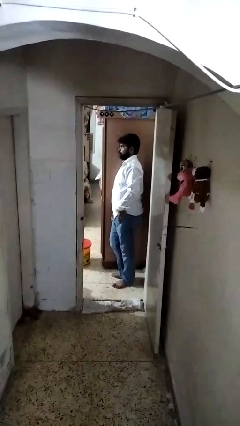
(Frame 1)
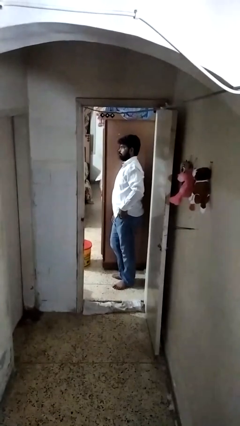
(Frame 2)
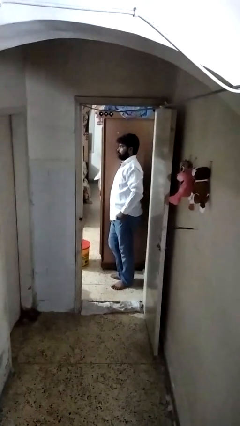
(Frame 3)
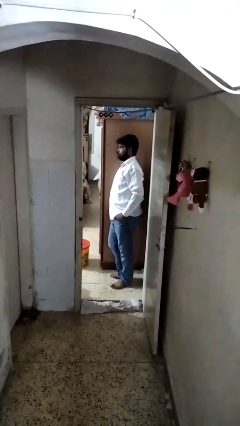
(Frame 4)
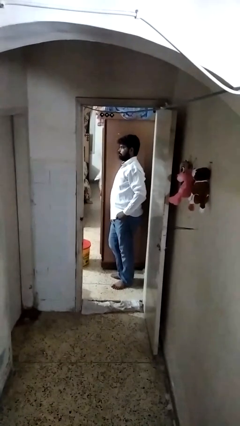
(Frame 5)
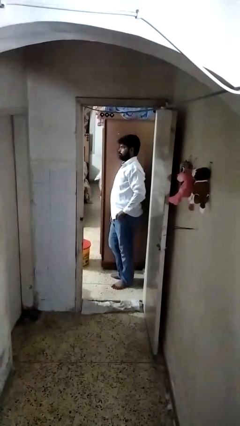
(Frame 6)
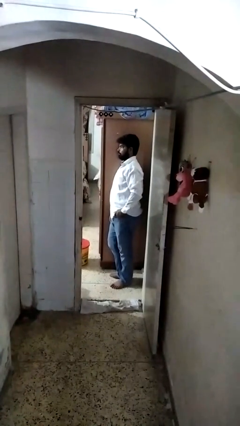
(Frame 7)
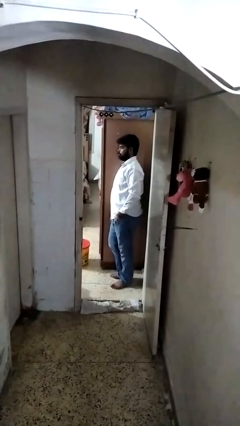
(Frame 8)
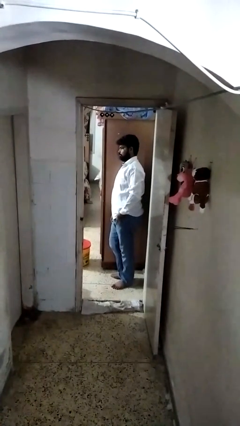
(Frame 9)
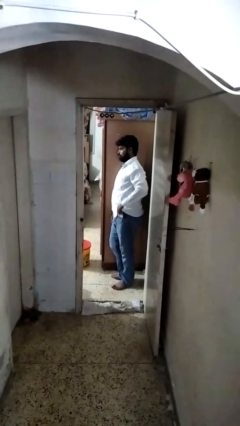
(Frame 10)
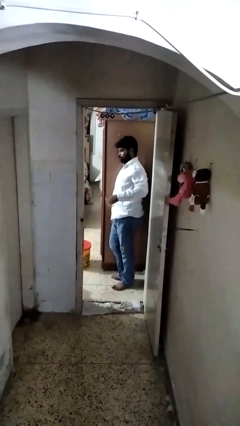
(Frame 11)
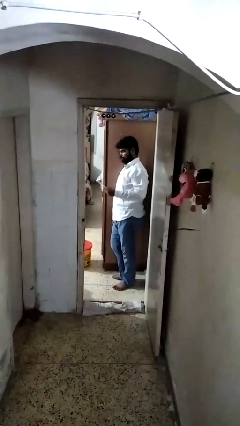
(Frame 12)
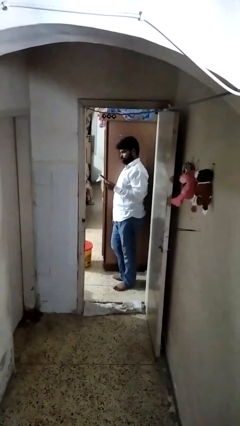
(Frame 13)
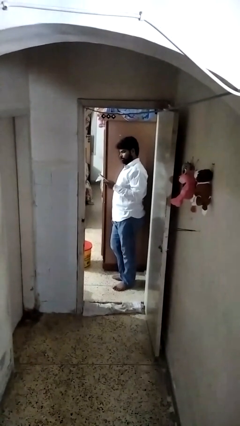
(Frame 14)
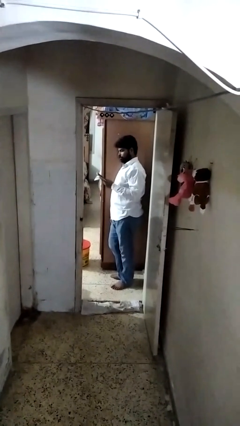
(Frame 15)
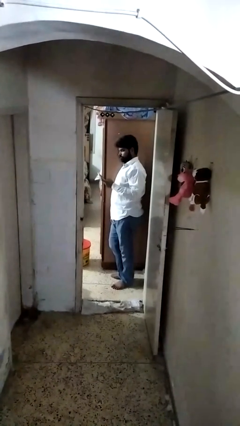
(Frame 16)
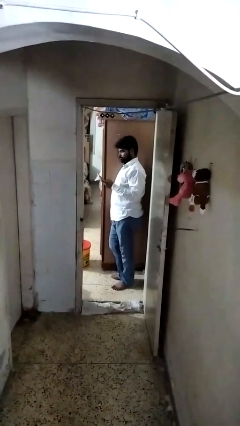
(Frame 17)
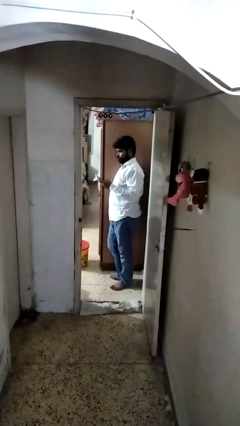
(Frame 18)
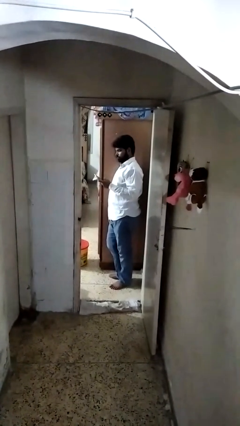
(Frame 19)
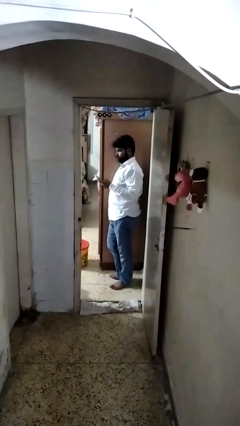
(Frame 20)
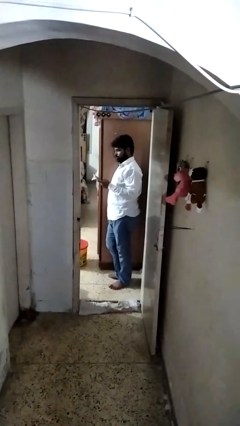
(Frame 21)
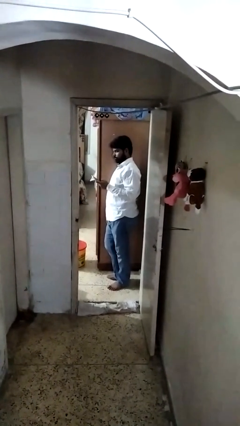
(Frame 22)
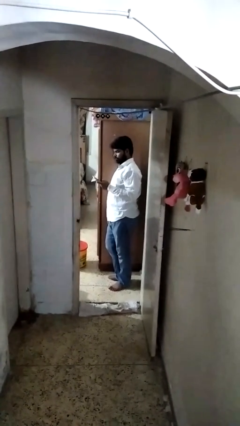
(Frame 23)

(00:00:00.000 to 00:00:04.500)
person takes phone from pocket

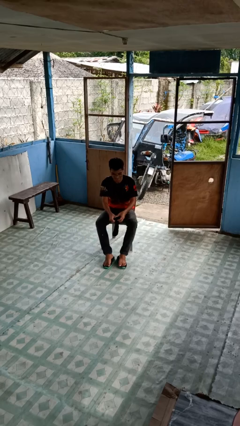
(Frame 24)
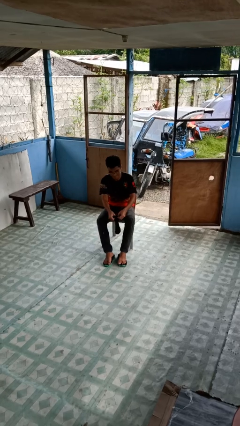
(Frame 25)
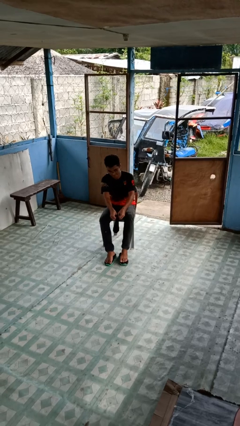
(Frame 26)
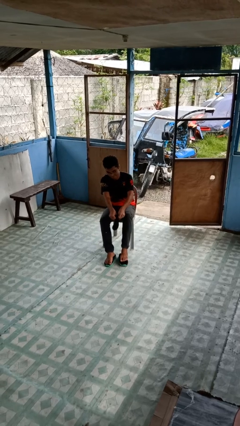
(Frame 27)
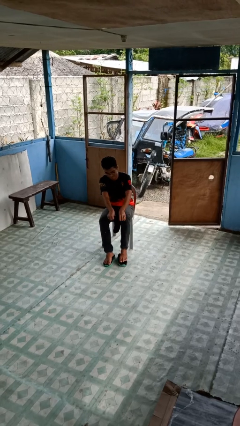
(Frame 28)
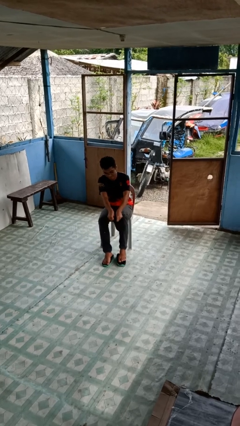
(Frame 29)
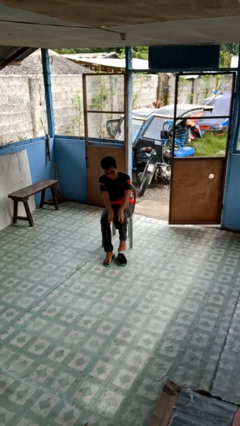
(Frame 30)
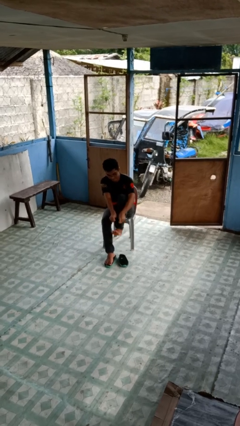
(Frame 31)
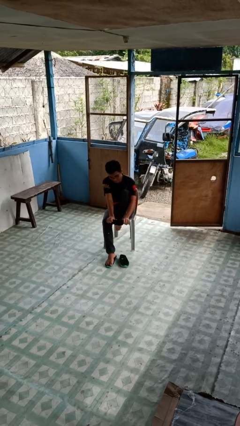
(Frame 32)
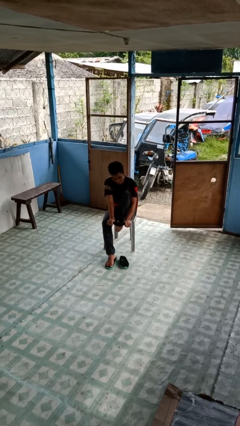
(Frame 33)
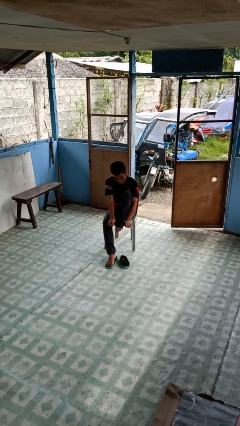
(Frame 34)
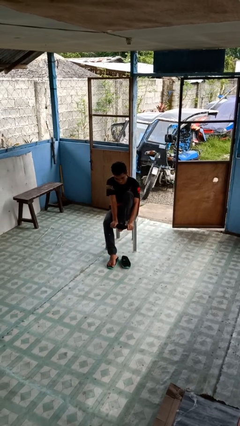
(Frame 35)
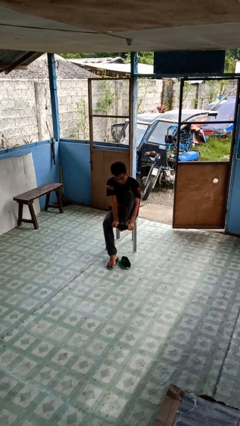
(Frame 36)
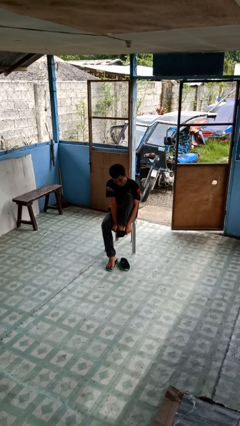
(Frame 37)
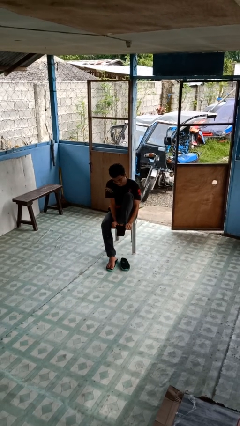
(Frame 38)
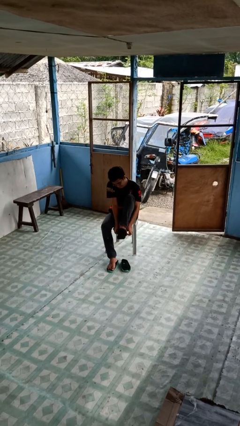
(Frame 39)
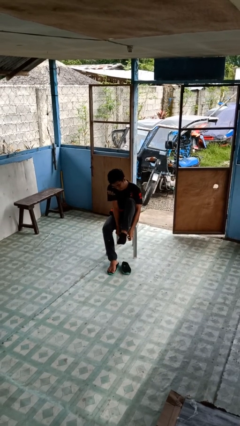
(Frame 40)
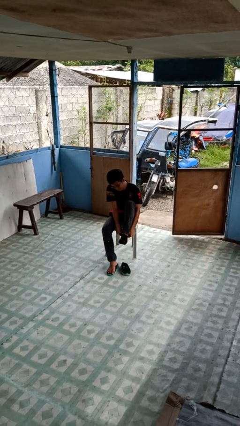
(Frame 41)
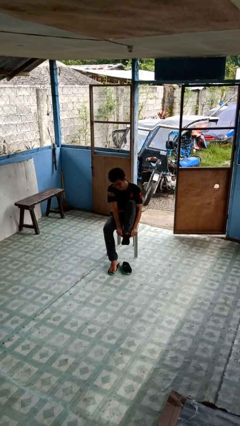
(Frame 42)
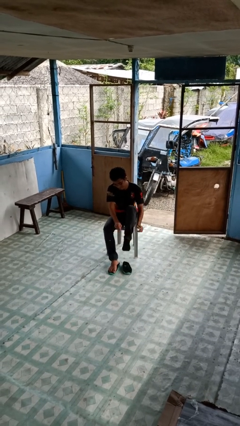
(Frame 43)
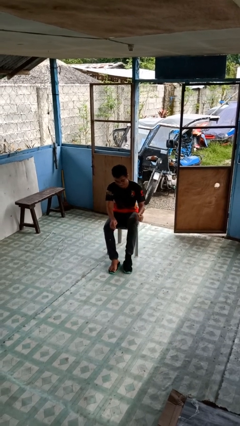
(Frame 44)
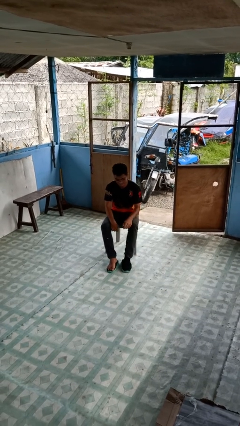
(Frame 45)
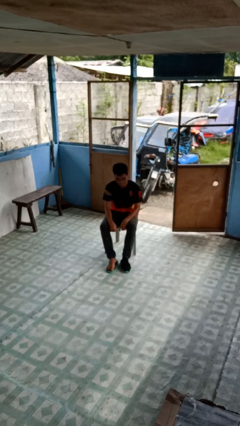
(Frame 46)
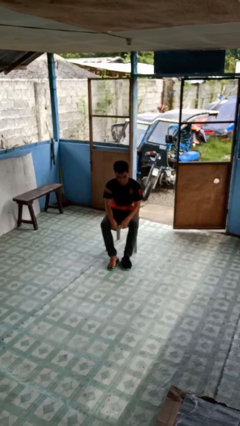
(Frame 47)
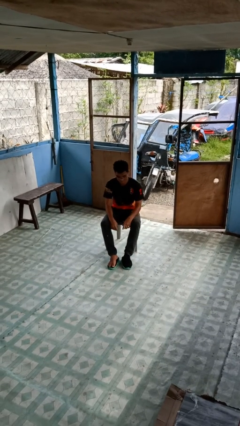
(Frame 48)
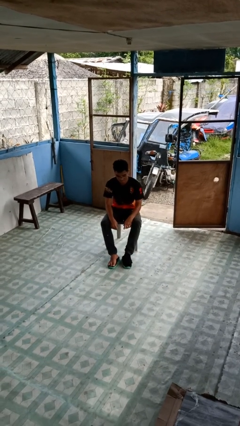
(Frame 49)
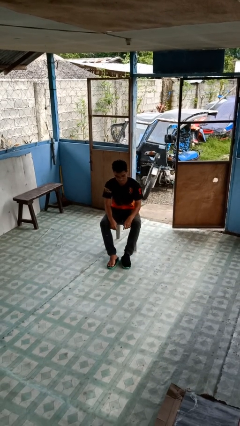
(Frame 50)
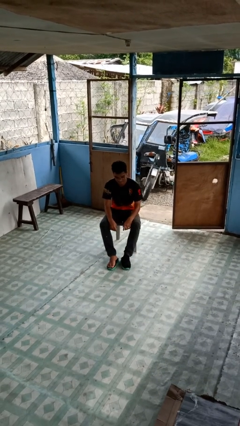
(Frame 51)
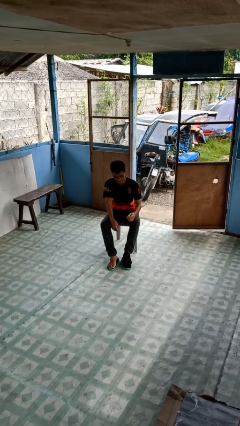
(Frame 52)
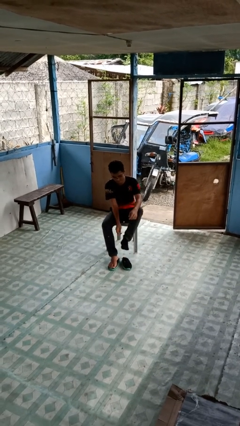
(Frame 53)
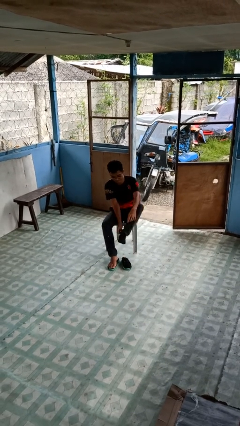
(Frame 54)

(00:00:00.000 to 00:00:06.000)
person puts on socks

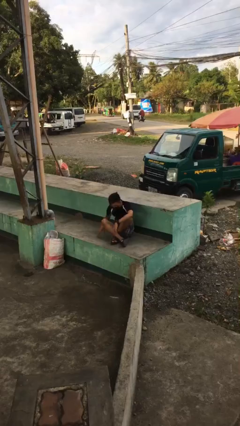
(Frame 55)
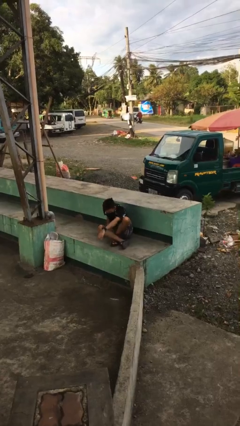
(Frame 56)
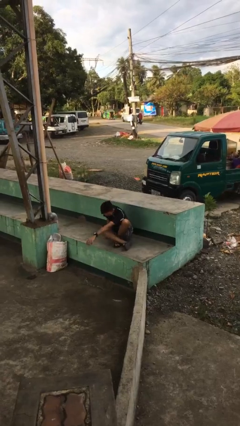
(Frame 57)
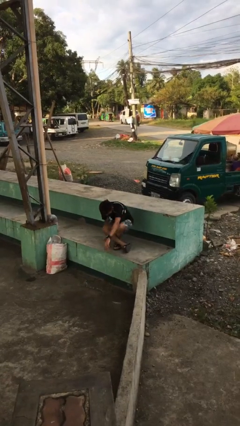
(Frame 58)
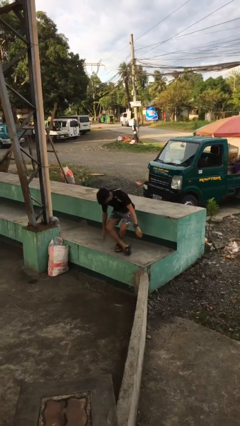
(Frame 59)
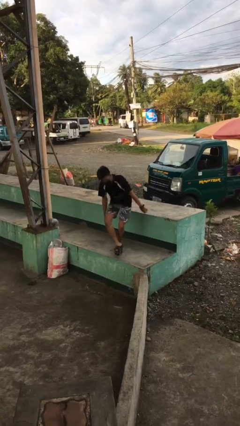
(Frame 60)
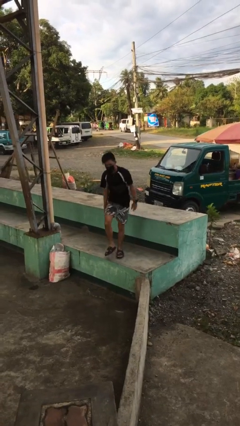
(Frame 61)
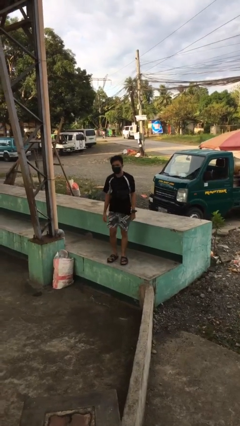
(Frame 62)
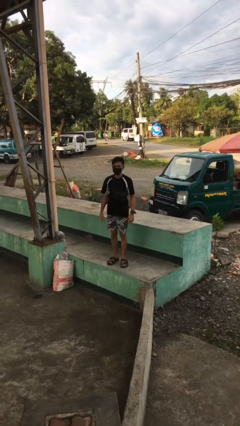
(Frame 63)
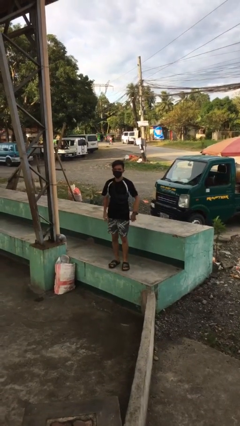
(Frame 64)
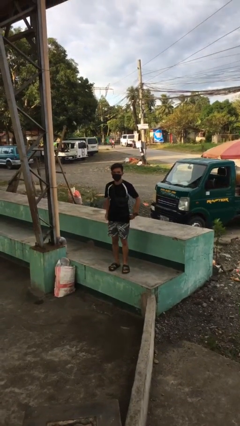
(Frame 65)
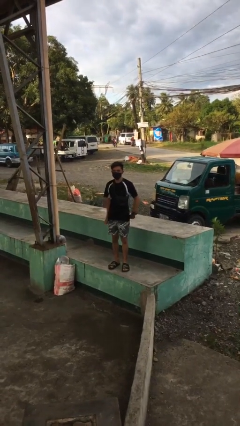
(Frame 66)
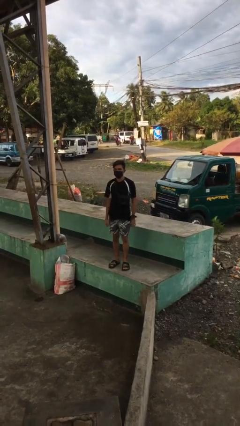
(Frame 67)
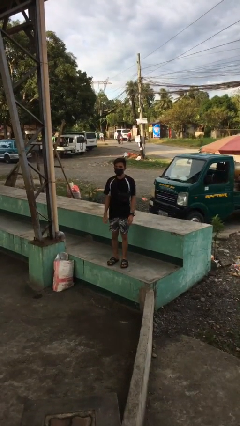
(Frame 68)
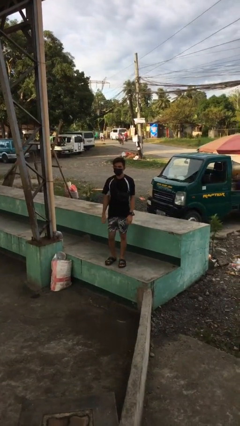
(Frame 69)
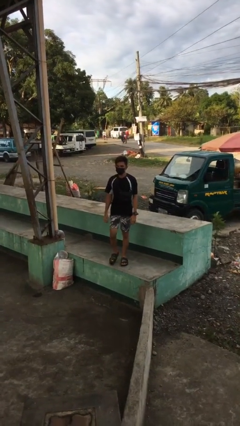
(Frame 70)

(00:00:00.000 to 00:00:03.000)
person stands up from floor

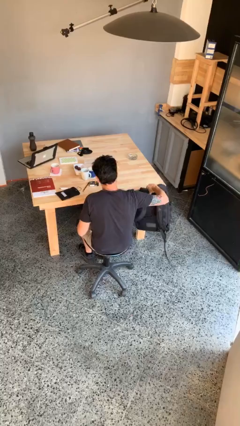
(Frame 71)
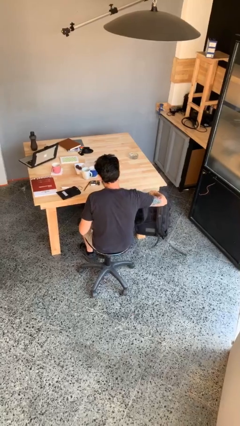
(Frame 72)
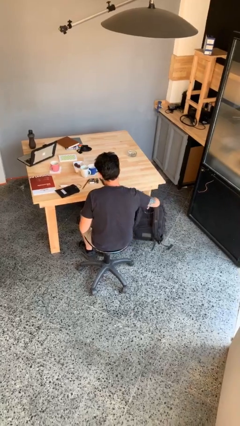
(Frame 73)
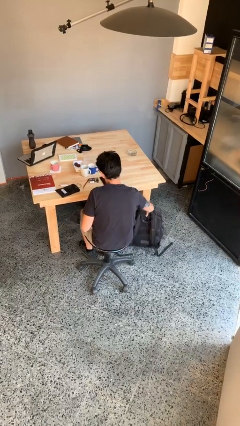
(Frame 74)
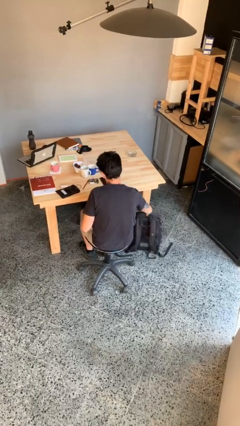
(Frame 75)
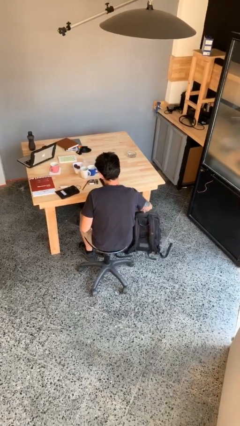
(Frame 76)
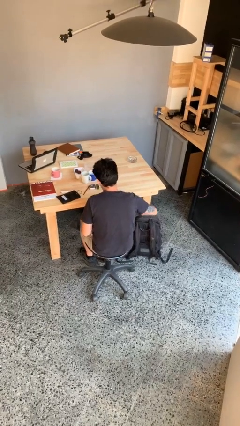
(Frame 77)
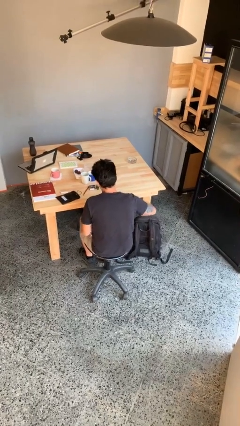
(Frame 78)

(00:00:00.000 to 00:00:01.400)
person puts down object on floor

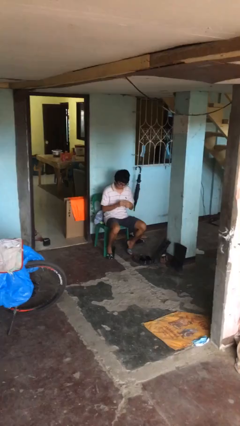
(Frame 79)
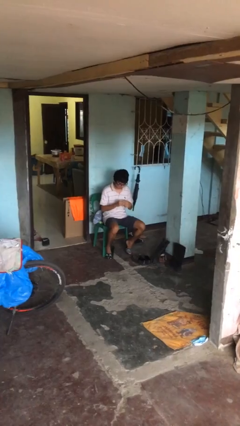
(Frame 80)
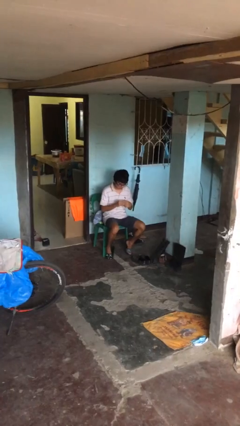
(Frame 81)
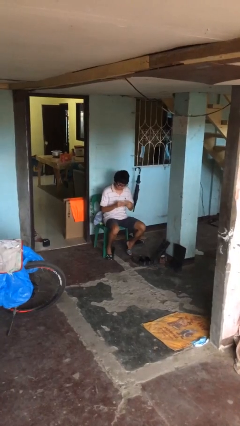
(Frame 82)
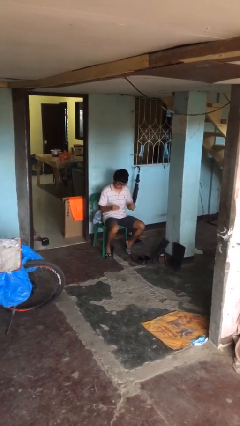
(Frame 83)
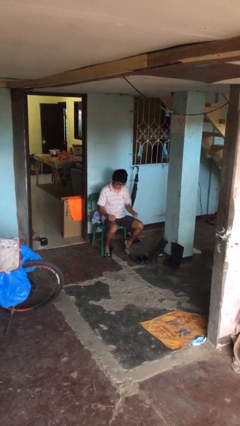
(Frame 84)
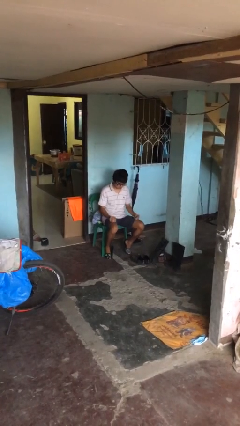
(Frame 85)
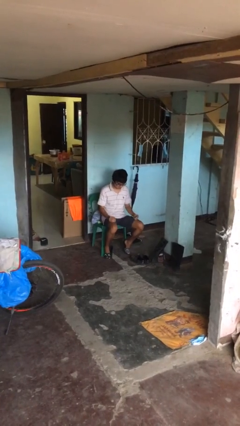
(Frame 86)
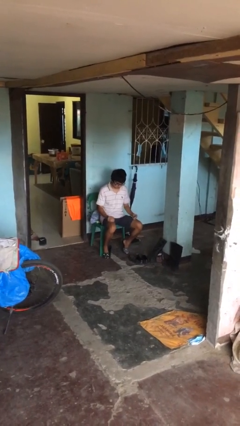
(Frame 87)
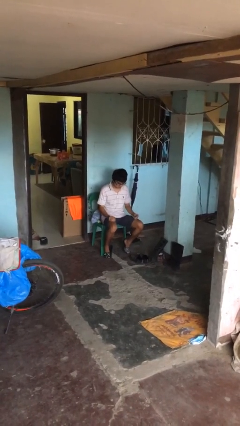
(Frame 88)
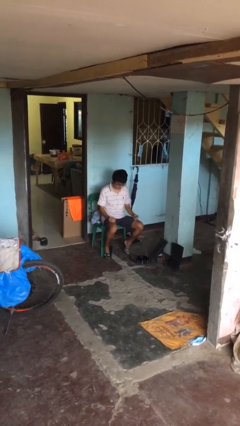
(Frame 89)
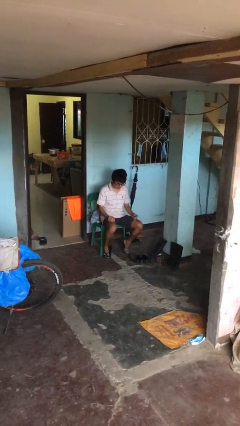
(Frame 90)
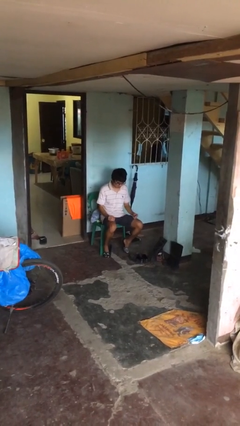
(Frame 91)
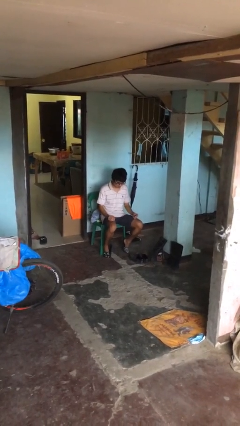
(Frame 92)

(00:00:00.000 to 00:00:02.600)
person takes off ring

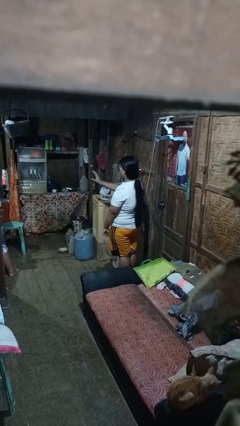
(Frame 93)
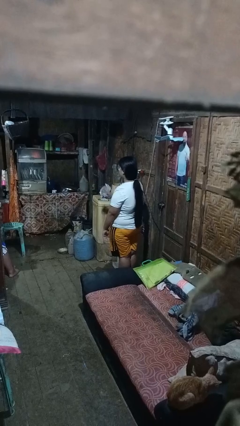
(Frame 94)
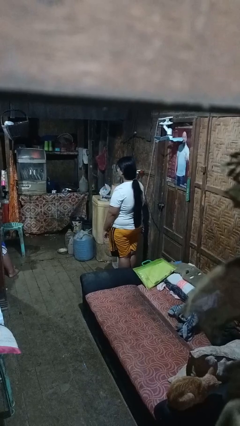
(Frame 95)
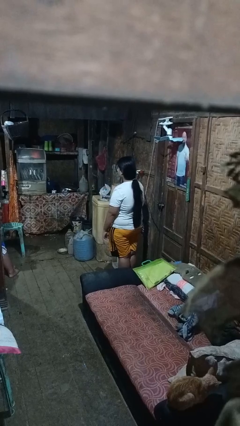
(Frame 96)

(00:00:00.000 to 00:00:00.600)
person gestures stop
